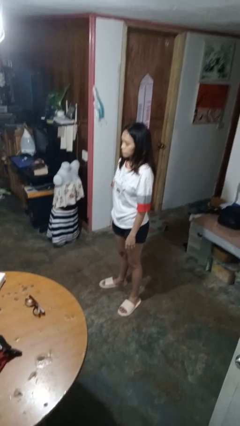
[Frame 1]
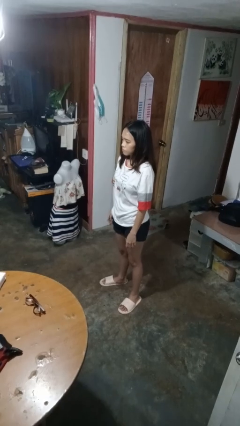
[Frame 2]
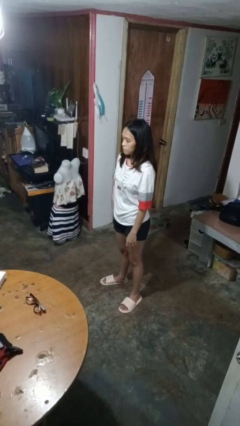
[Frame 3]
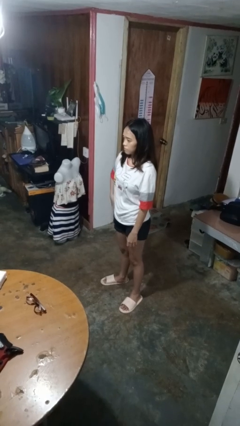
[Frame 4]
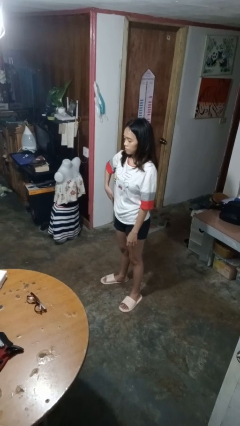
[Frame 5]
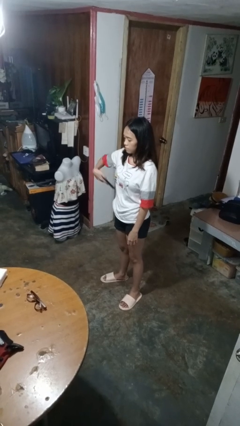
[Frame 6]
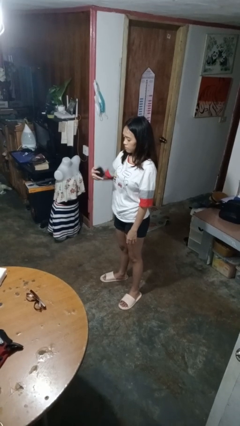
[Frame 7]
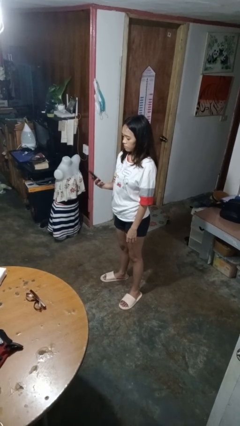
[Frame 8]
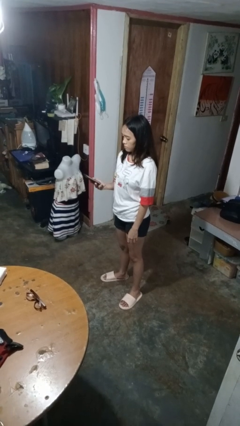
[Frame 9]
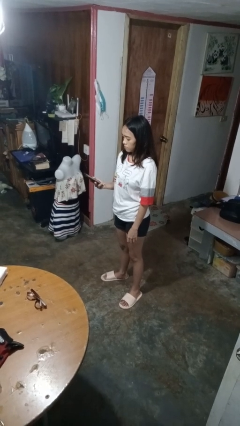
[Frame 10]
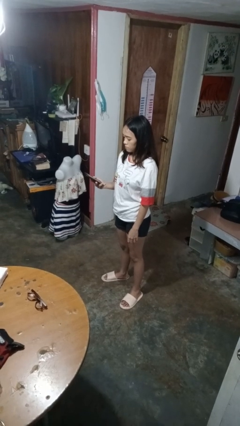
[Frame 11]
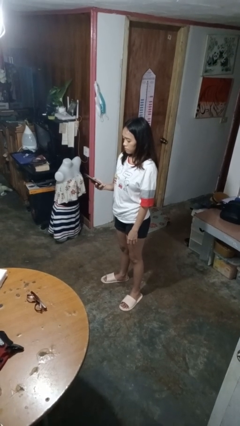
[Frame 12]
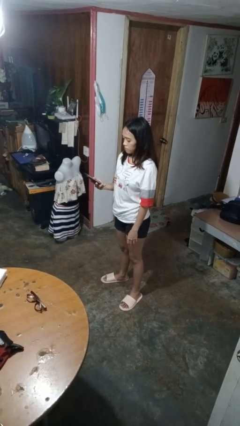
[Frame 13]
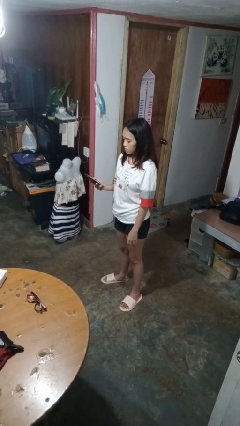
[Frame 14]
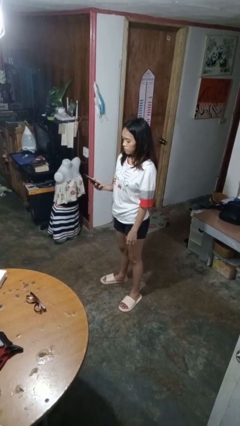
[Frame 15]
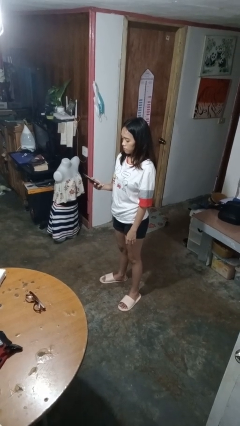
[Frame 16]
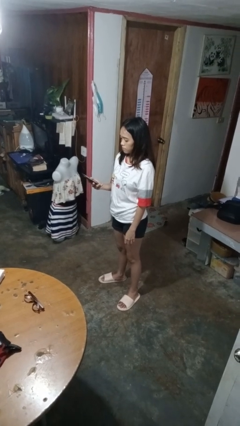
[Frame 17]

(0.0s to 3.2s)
person takes phone from pocket

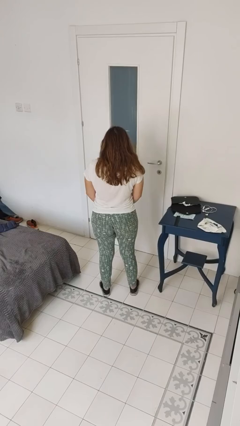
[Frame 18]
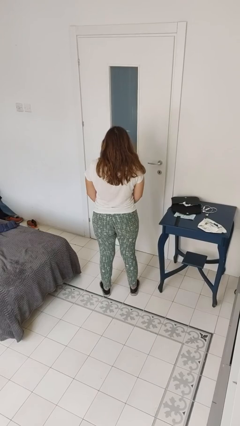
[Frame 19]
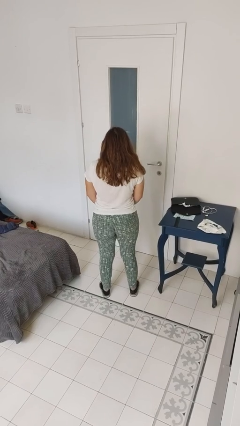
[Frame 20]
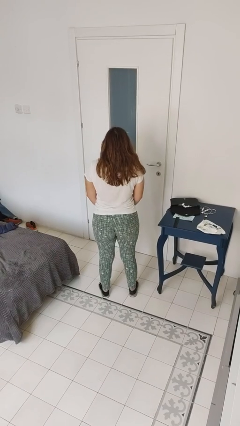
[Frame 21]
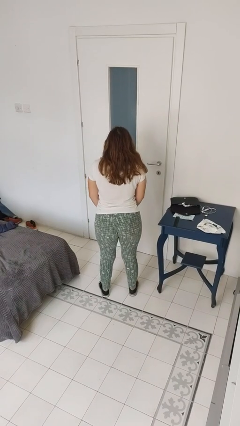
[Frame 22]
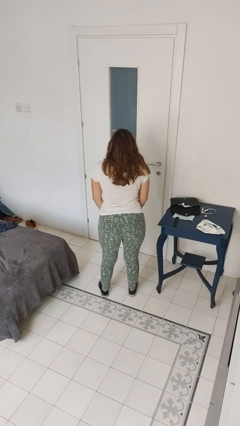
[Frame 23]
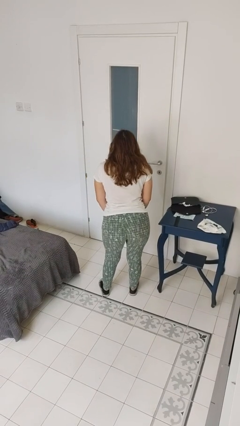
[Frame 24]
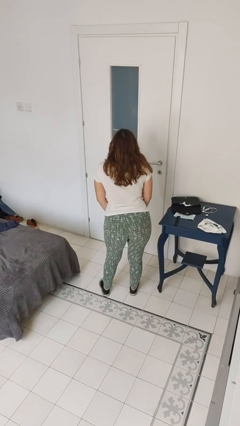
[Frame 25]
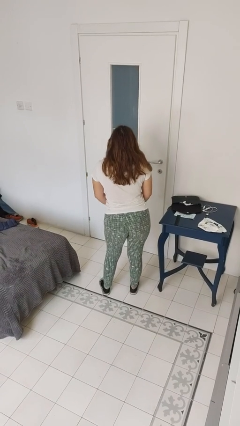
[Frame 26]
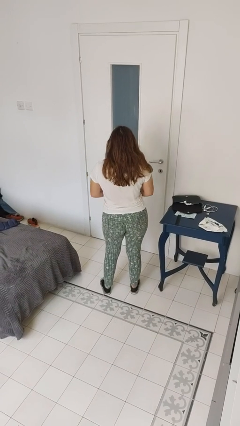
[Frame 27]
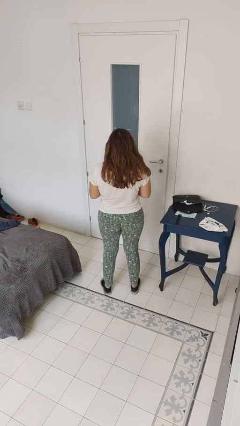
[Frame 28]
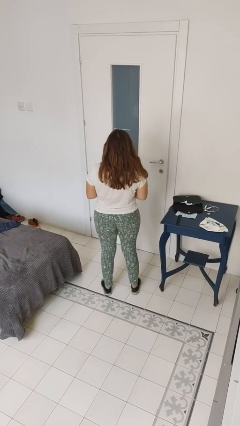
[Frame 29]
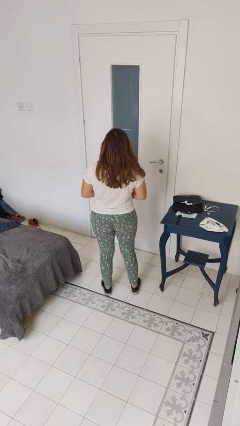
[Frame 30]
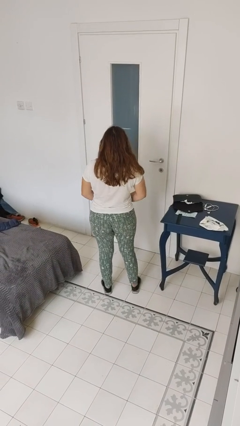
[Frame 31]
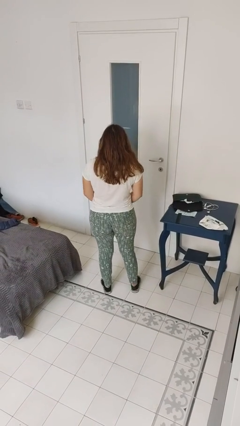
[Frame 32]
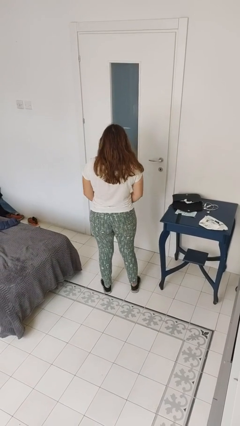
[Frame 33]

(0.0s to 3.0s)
person wiggles hips

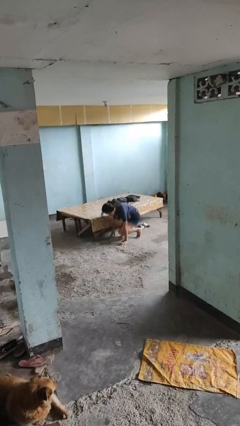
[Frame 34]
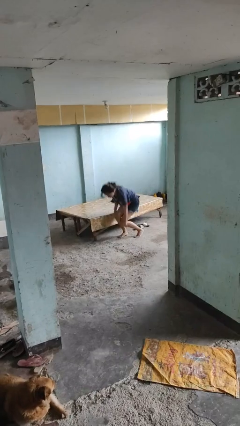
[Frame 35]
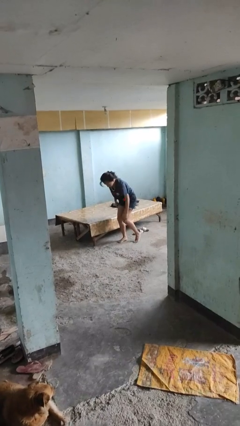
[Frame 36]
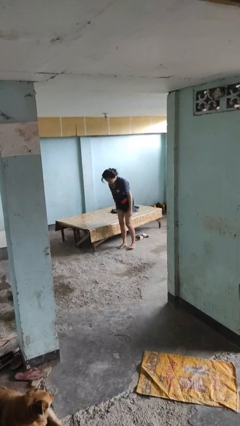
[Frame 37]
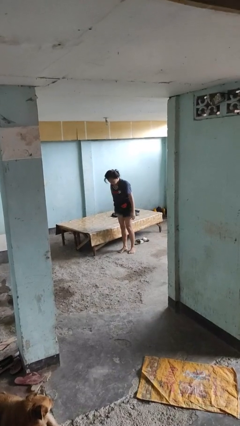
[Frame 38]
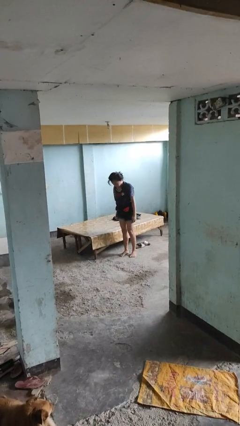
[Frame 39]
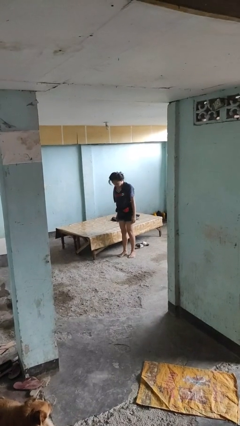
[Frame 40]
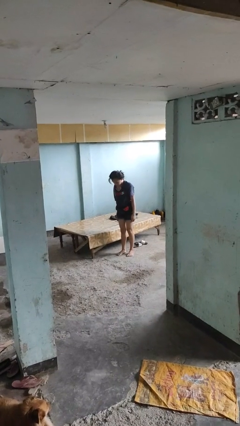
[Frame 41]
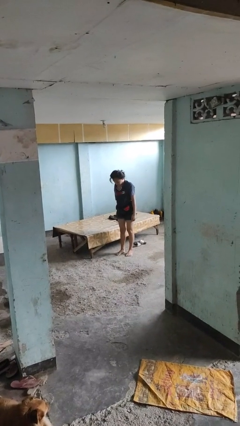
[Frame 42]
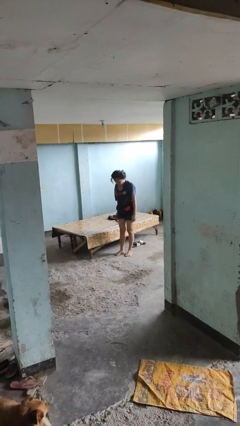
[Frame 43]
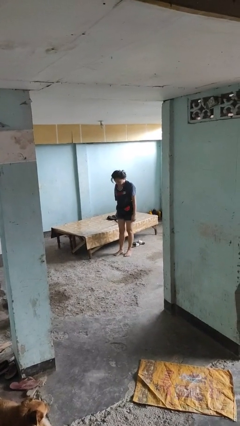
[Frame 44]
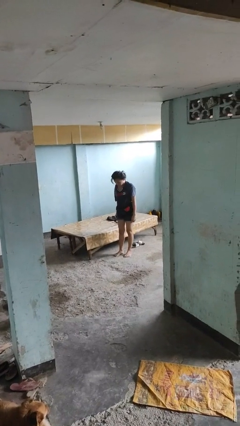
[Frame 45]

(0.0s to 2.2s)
person stands up from floor

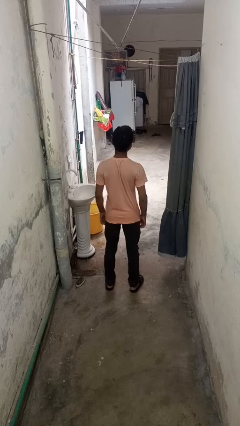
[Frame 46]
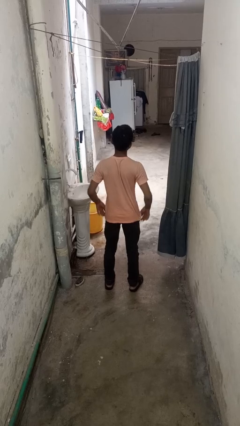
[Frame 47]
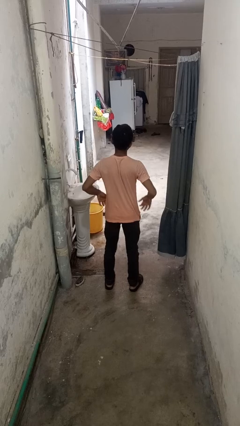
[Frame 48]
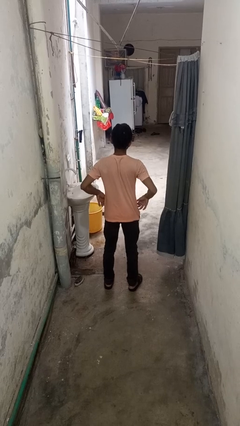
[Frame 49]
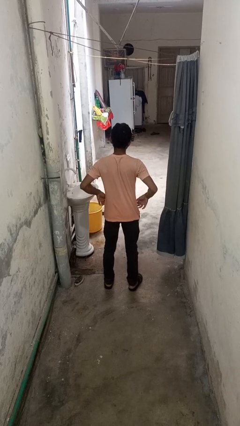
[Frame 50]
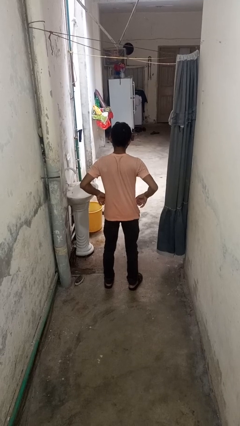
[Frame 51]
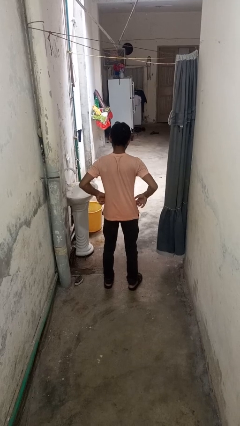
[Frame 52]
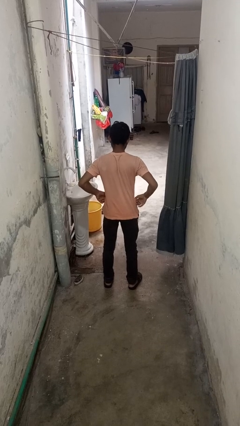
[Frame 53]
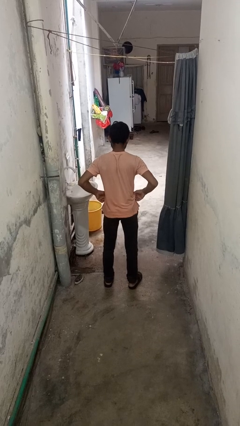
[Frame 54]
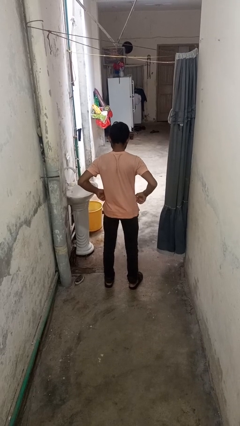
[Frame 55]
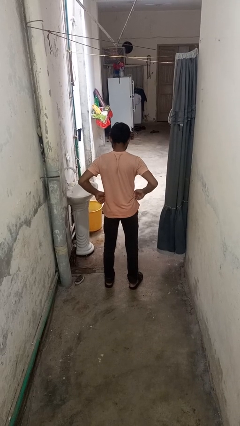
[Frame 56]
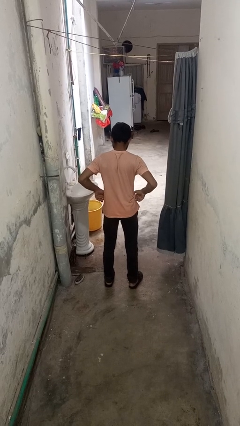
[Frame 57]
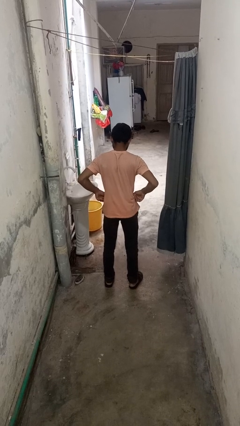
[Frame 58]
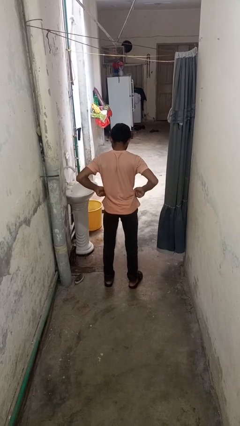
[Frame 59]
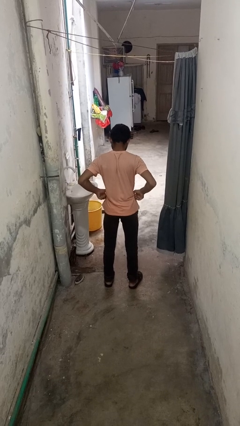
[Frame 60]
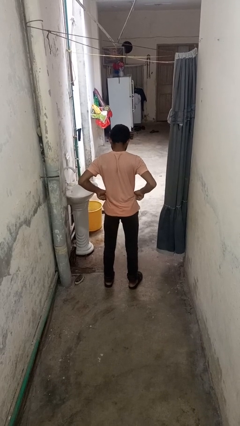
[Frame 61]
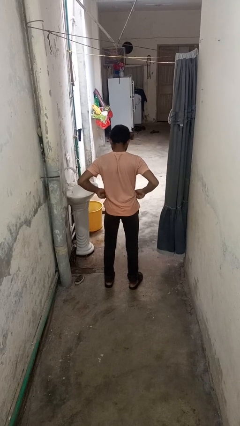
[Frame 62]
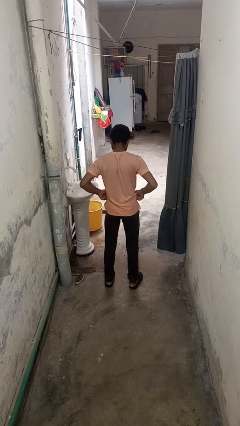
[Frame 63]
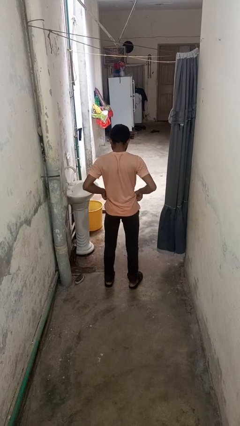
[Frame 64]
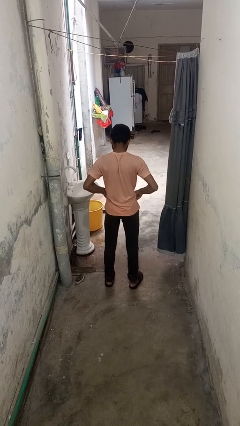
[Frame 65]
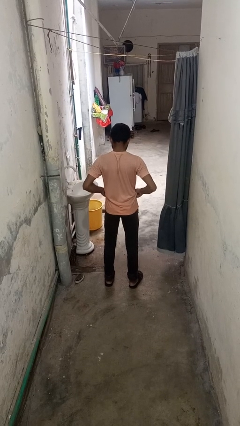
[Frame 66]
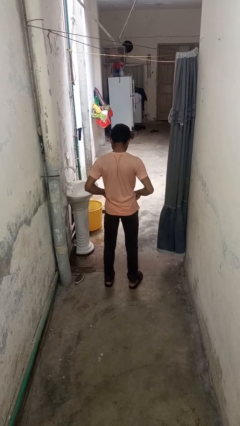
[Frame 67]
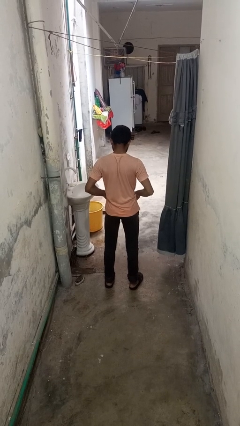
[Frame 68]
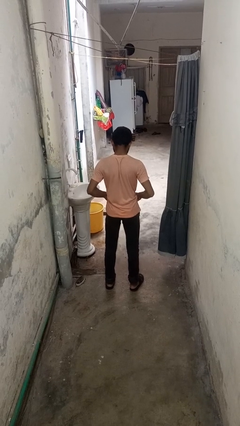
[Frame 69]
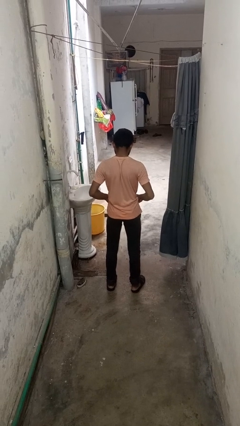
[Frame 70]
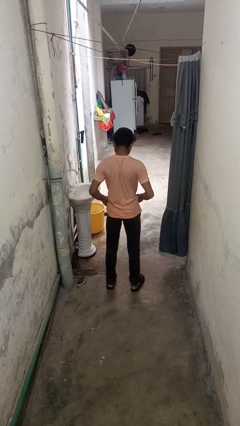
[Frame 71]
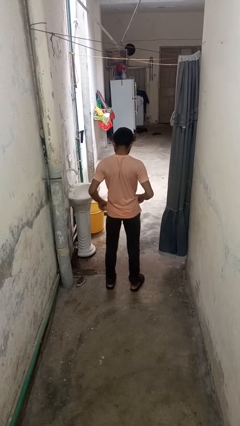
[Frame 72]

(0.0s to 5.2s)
person hikes up pants

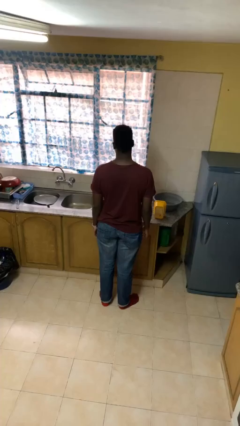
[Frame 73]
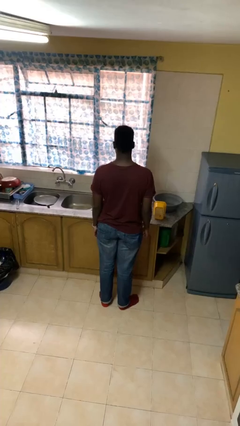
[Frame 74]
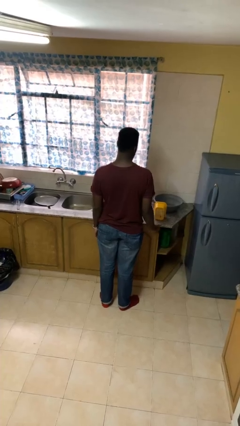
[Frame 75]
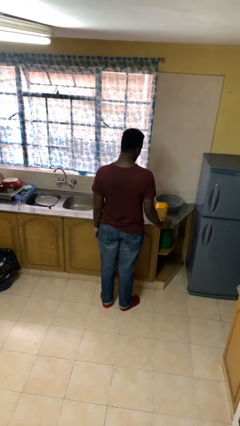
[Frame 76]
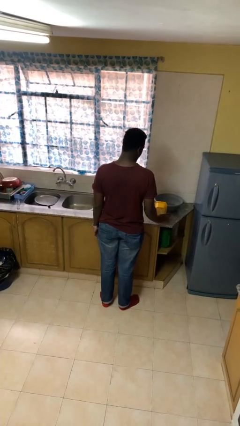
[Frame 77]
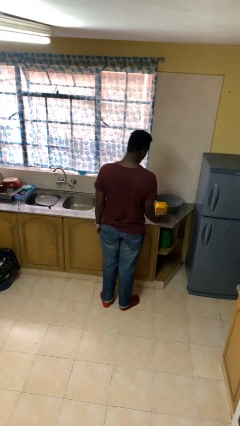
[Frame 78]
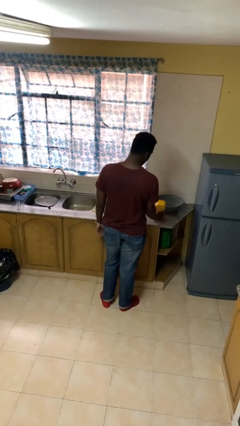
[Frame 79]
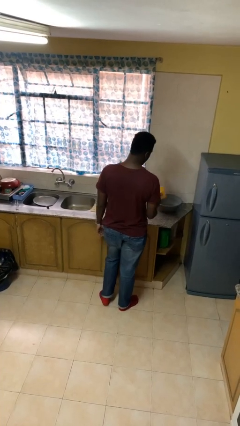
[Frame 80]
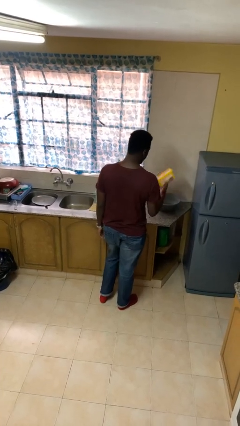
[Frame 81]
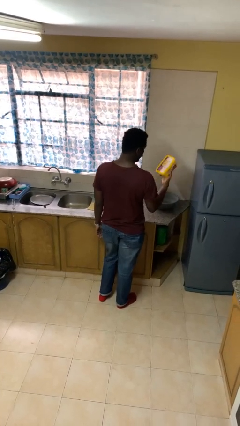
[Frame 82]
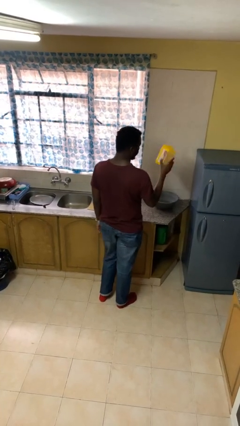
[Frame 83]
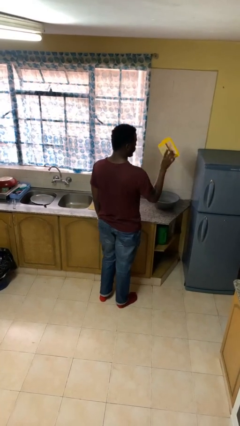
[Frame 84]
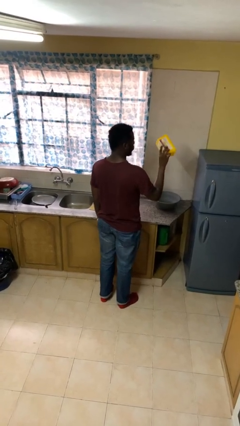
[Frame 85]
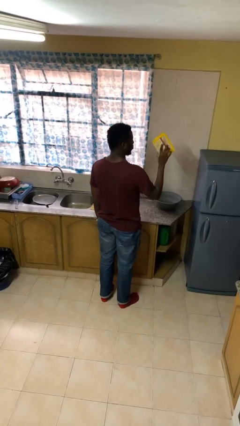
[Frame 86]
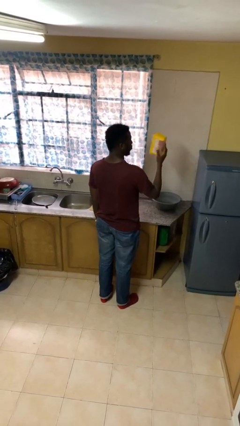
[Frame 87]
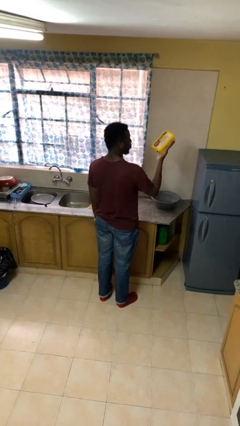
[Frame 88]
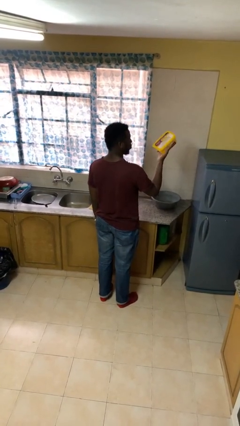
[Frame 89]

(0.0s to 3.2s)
person picks up object from countertop

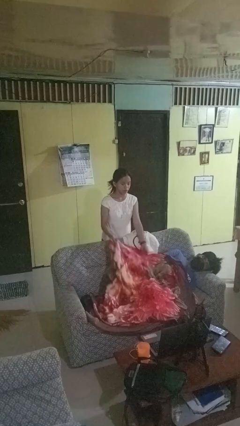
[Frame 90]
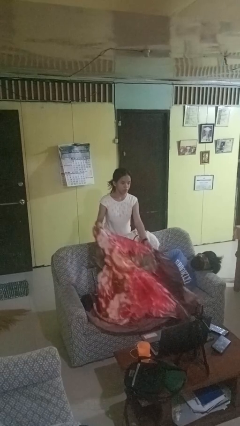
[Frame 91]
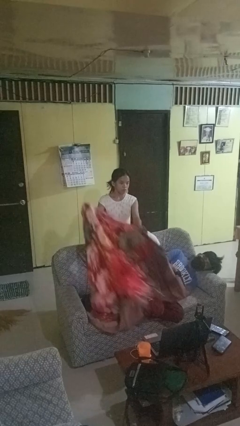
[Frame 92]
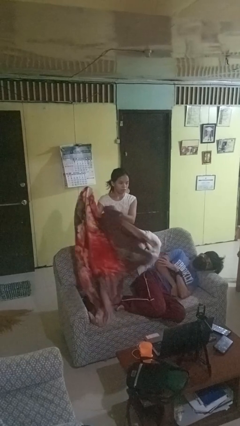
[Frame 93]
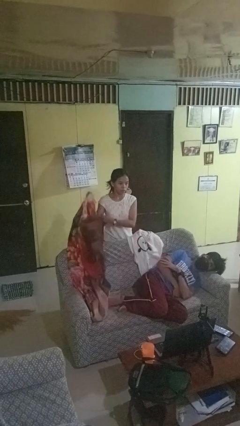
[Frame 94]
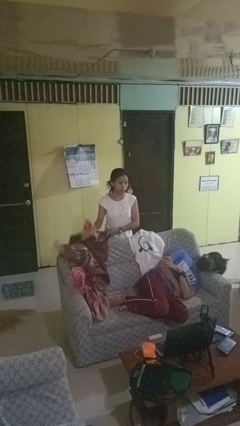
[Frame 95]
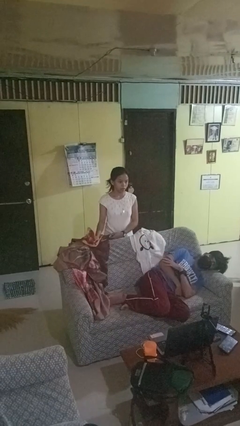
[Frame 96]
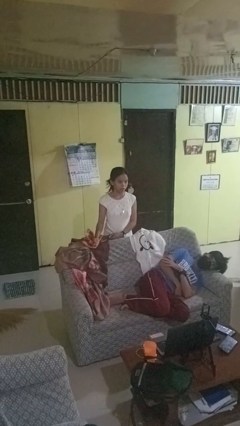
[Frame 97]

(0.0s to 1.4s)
person uncovers friend with blanket
